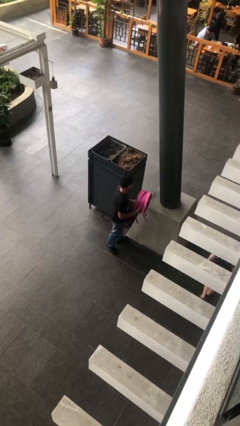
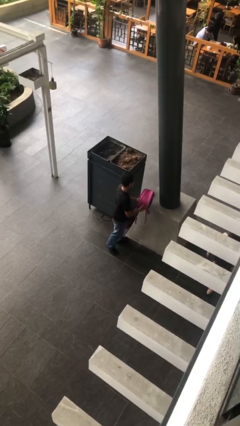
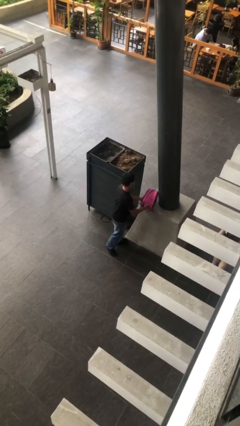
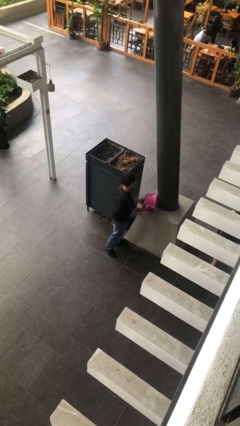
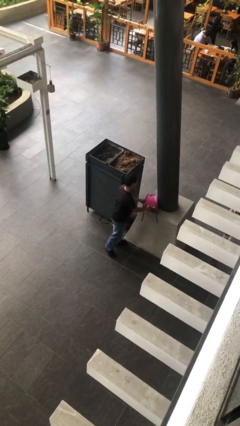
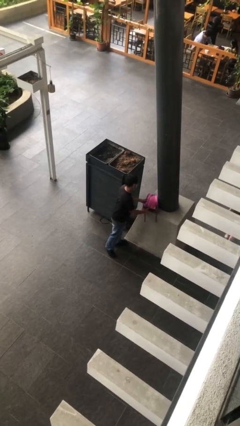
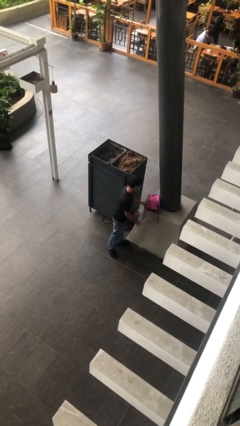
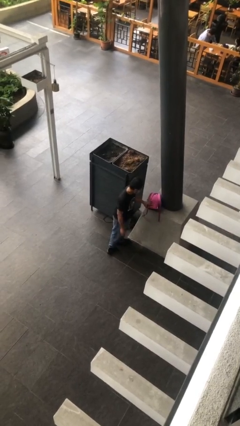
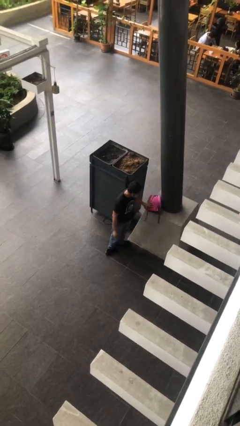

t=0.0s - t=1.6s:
person puts down object on table

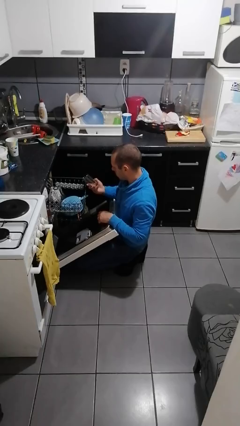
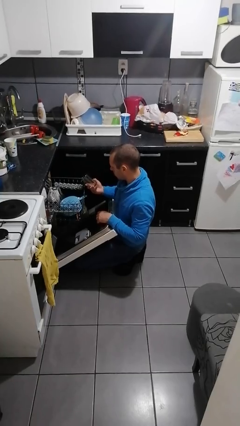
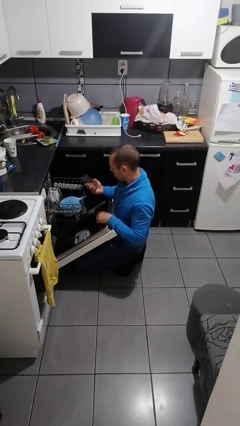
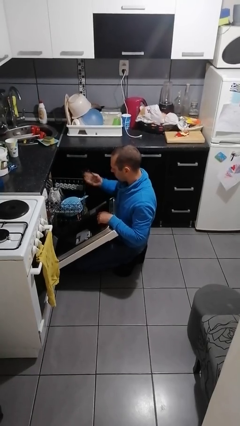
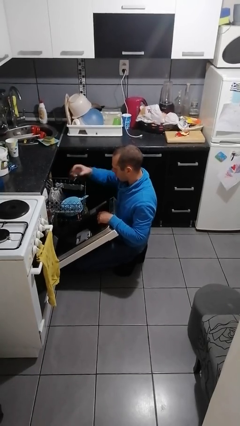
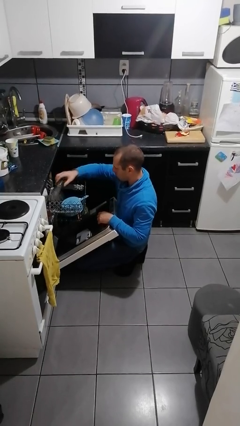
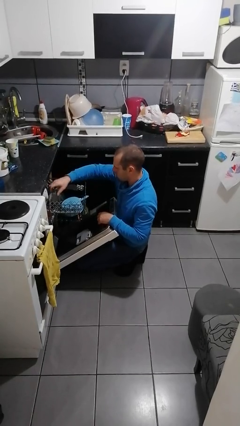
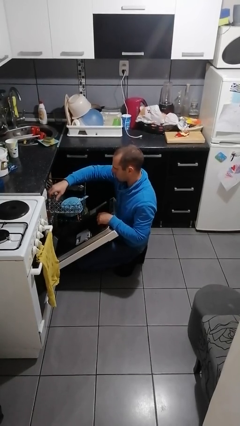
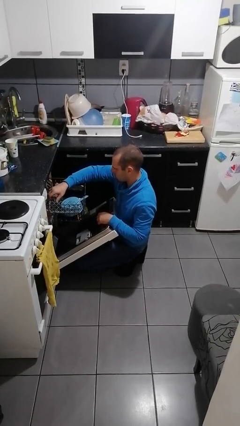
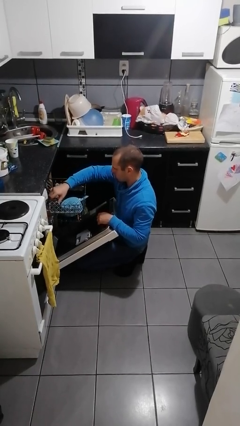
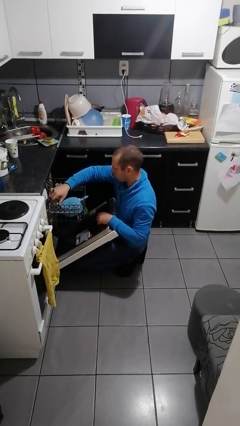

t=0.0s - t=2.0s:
person loads dishwasher

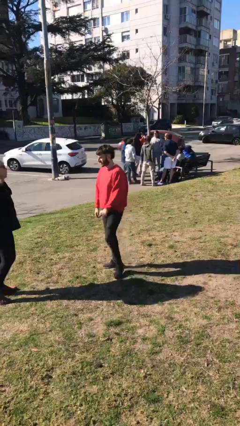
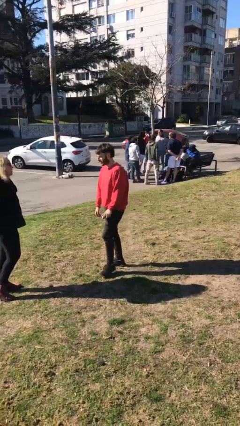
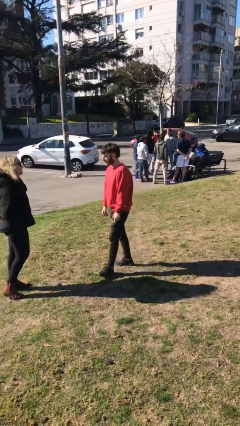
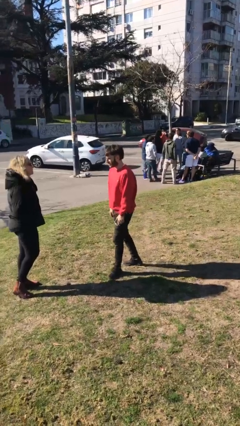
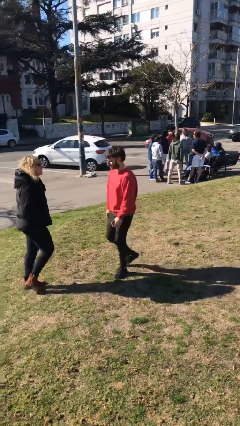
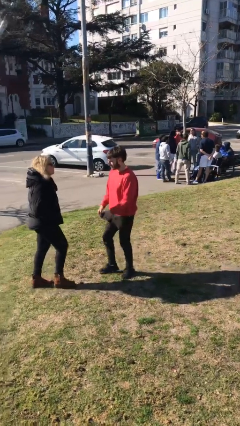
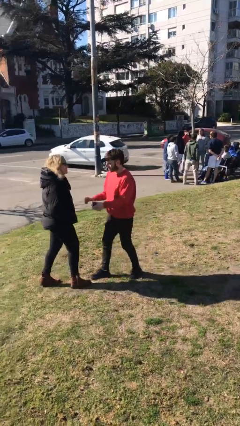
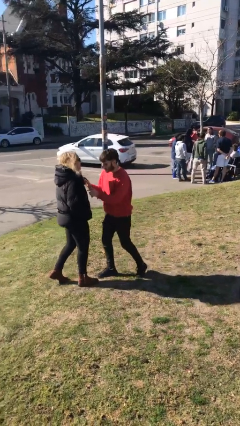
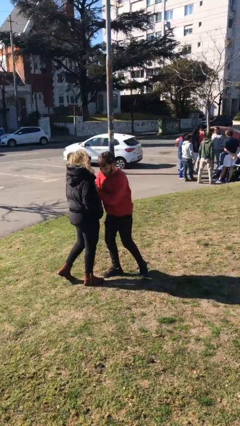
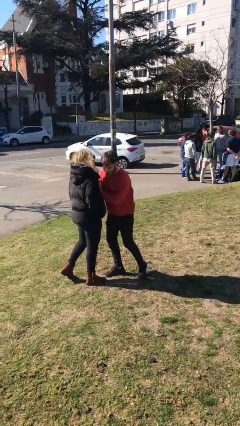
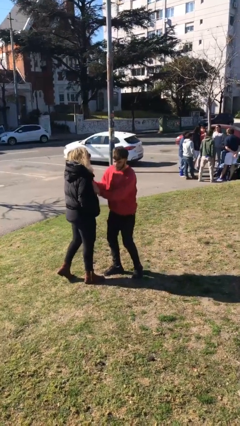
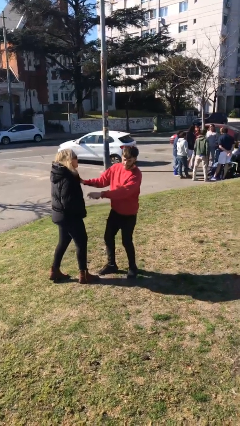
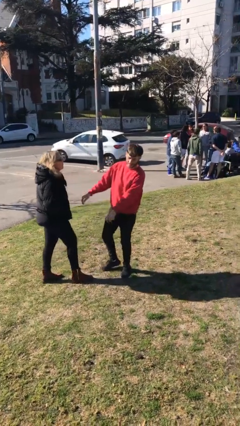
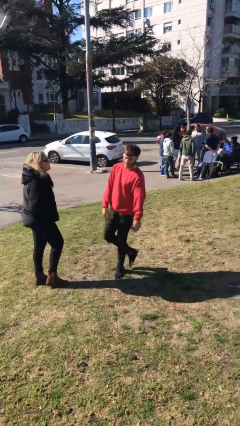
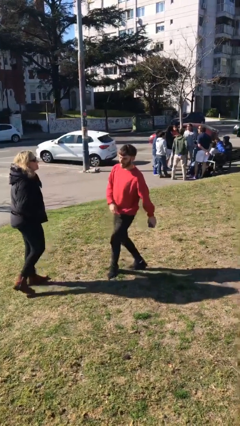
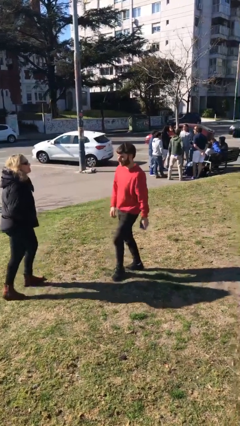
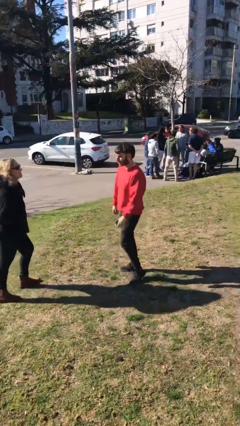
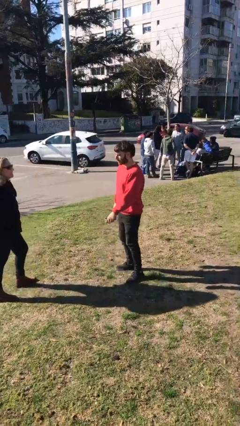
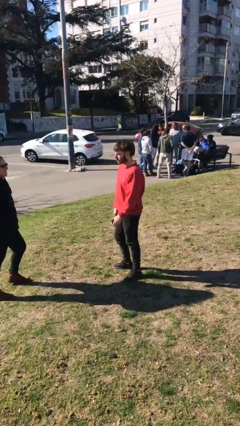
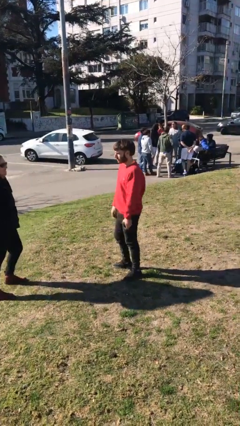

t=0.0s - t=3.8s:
person shoves person

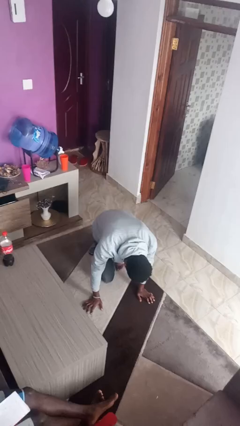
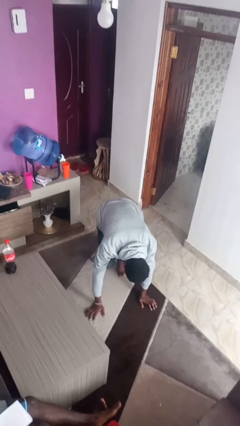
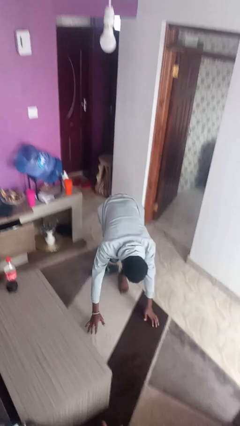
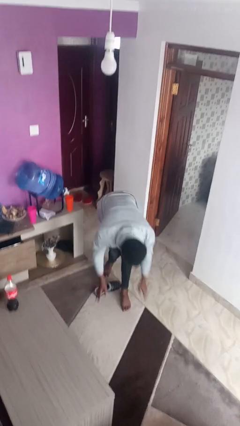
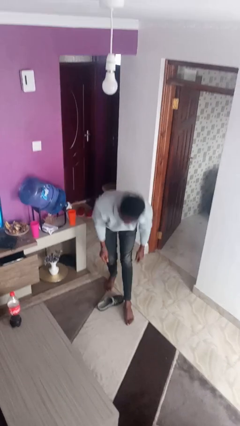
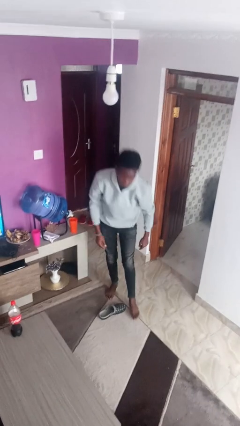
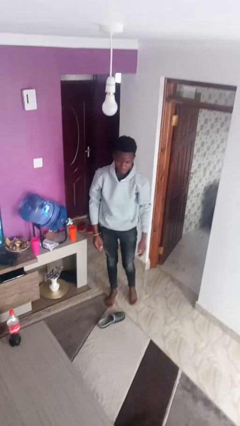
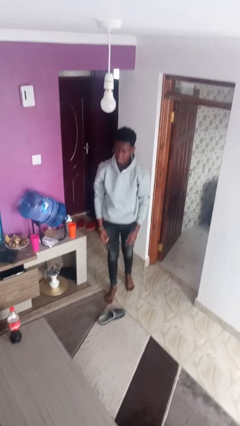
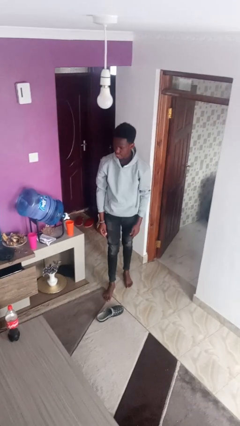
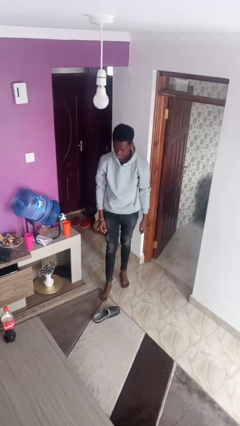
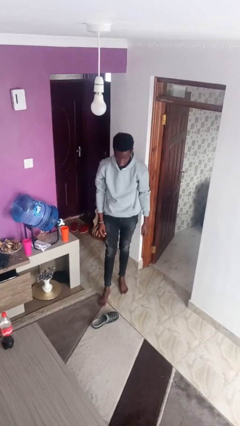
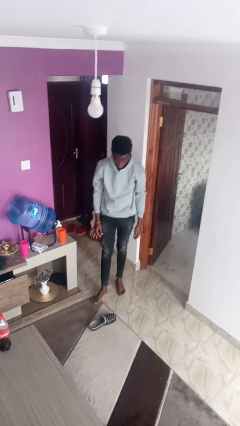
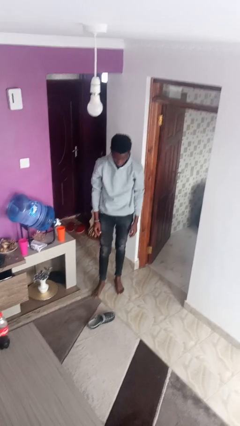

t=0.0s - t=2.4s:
person stands up from floor

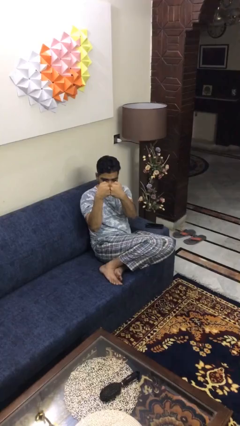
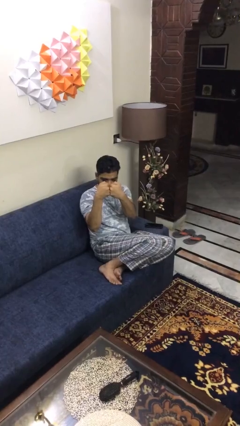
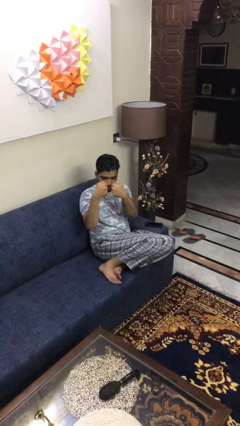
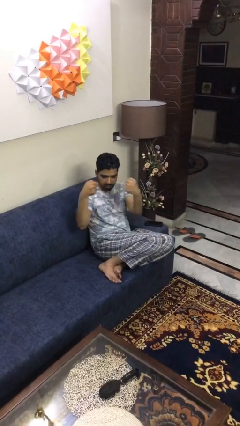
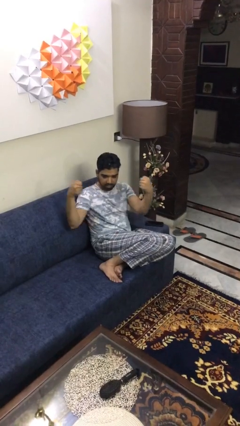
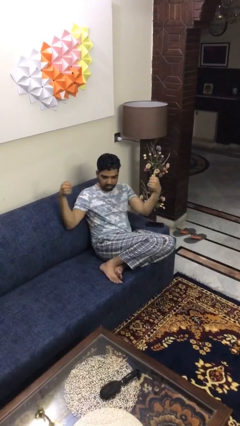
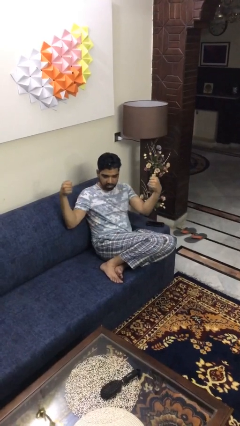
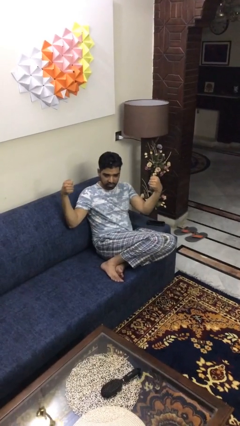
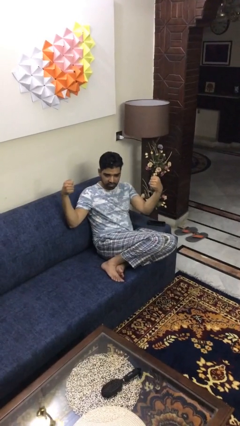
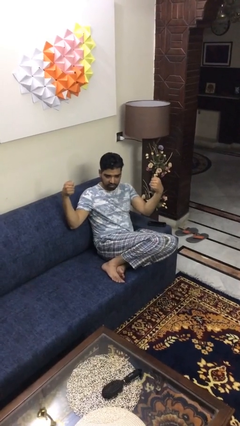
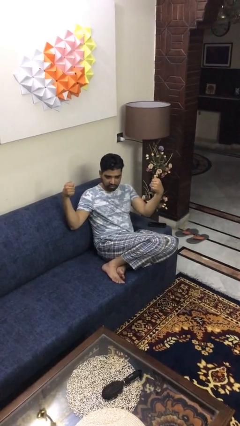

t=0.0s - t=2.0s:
person gestures zoom in

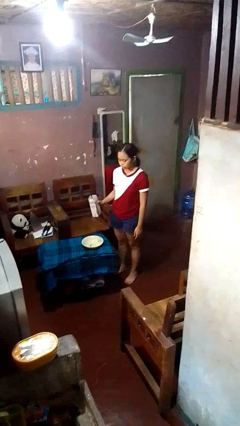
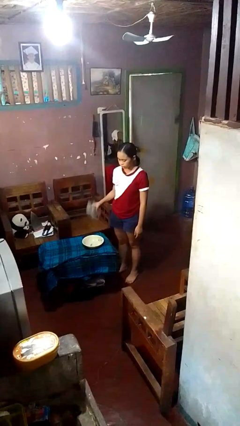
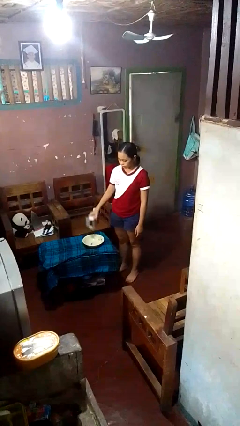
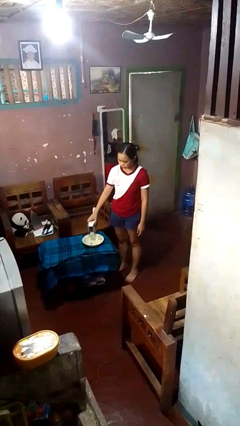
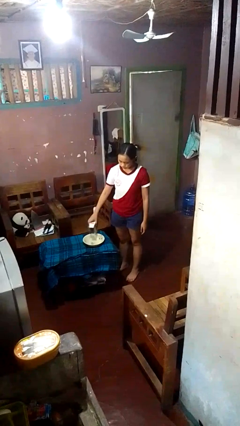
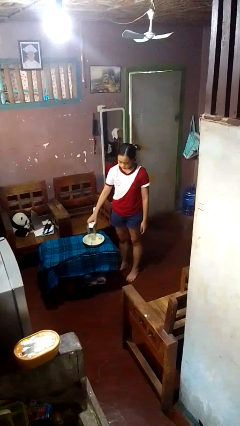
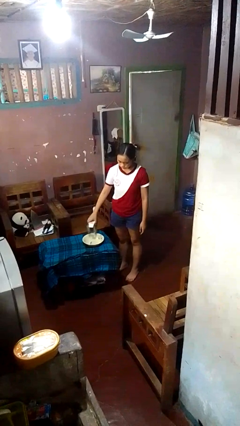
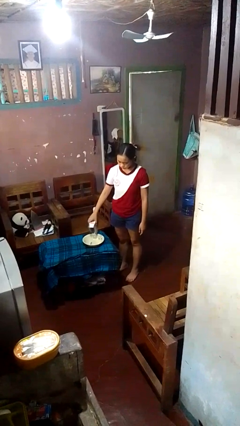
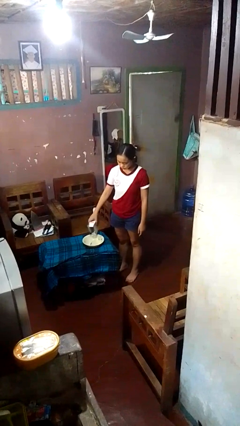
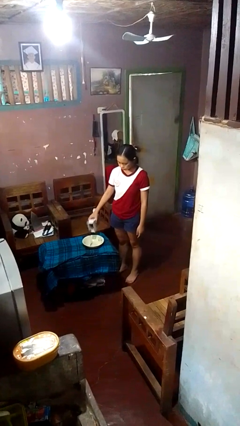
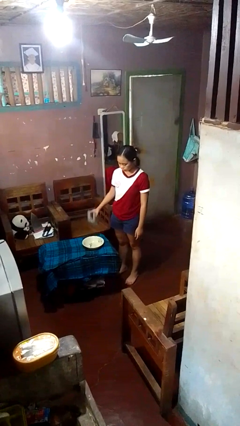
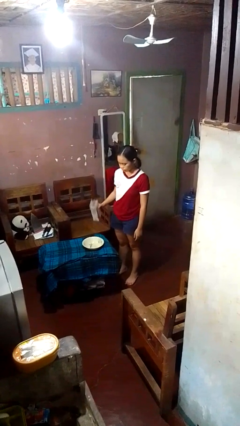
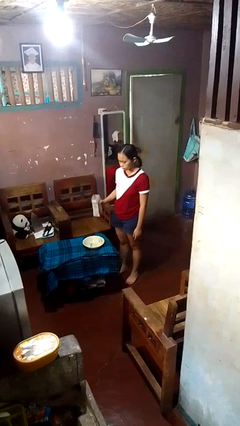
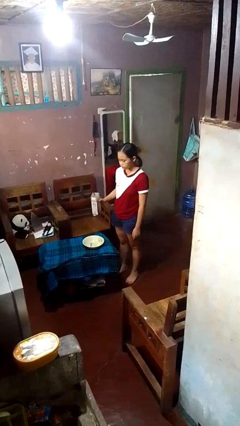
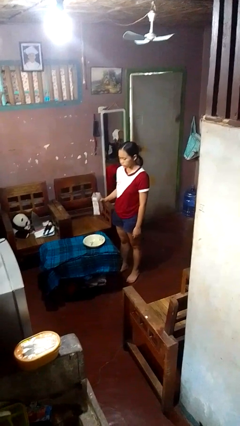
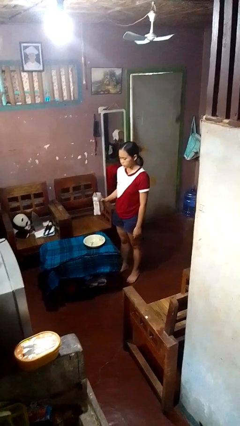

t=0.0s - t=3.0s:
person pours into bowl

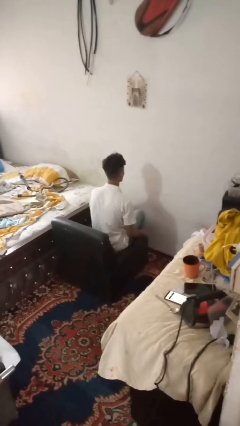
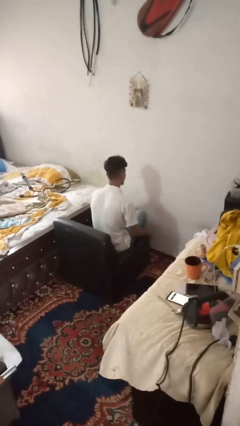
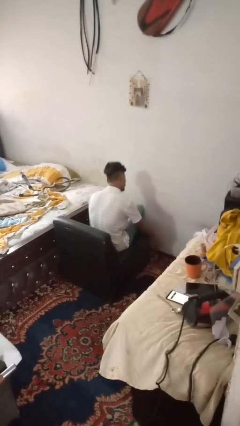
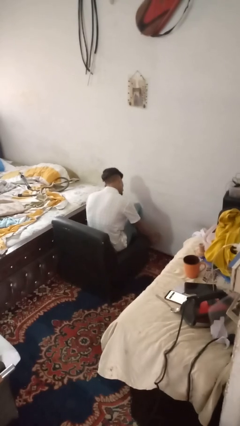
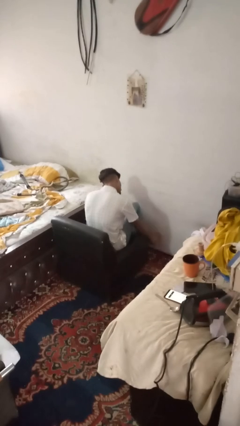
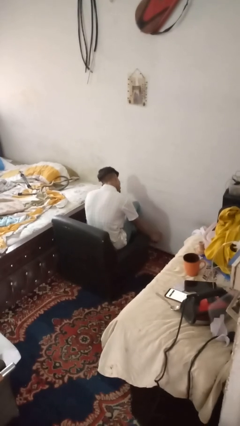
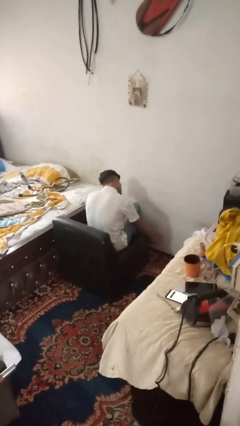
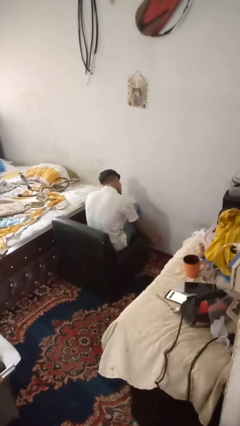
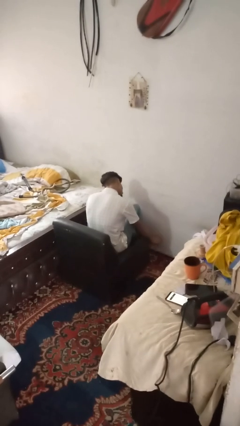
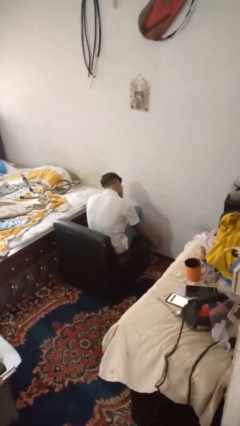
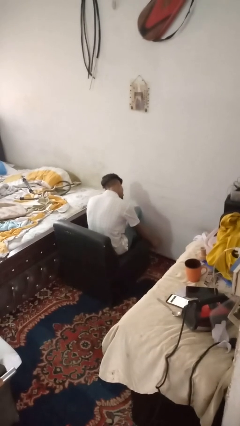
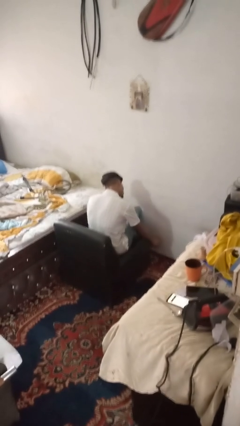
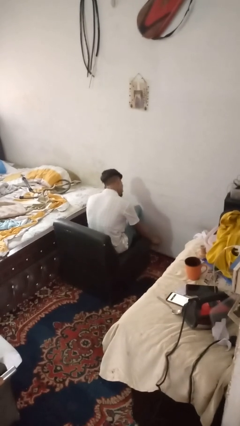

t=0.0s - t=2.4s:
person rubs foot
